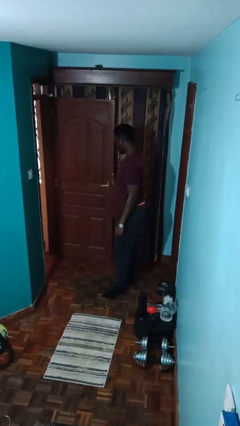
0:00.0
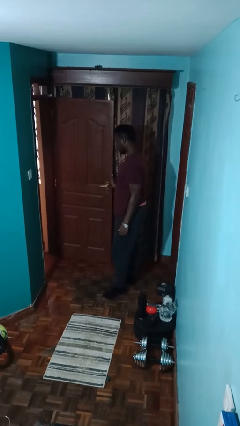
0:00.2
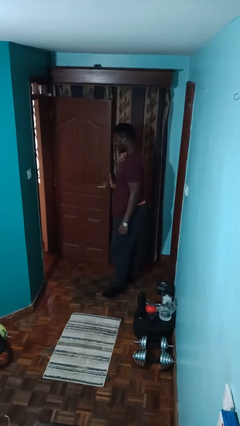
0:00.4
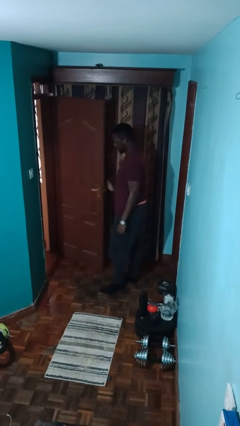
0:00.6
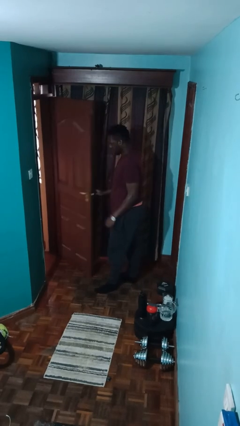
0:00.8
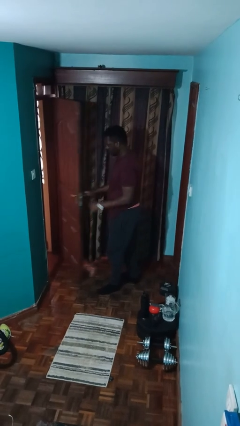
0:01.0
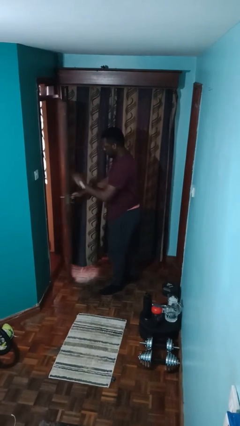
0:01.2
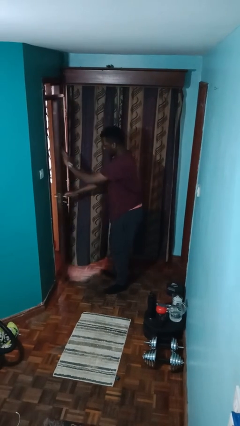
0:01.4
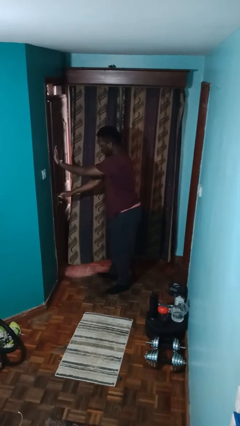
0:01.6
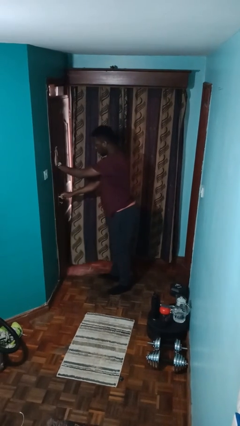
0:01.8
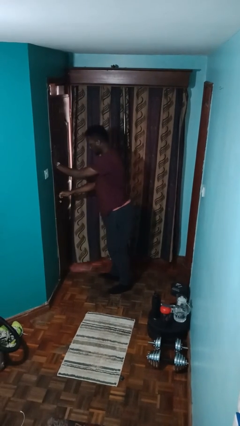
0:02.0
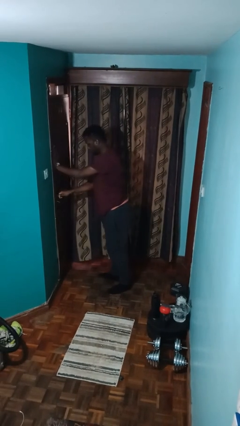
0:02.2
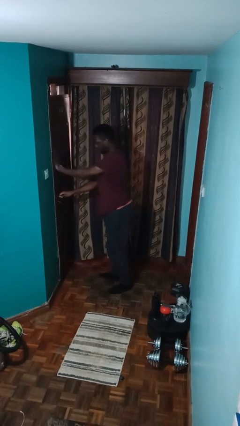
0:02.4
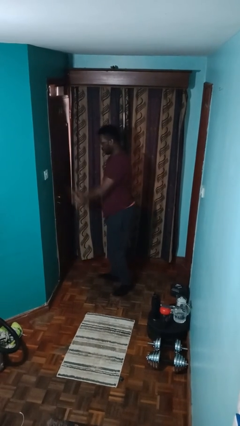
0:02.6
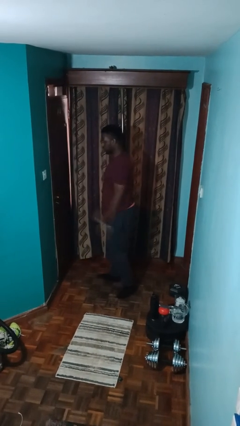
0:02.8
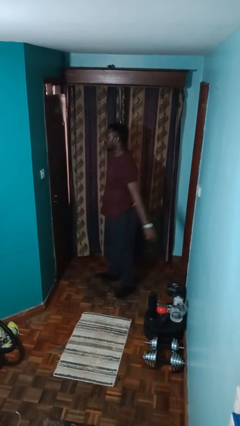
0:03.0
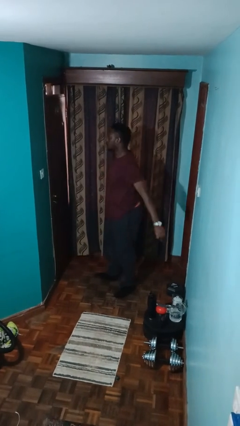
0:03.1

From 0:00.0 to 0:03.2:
person closes facility door

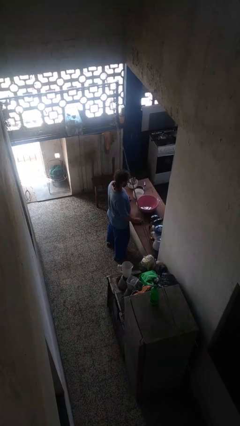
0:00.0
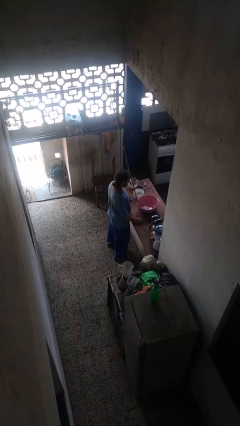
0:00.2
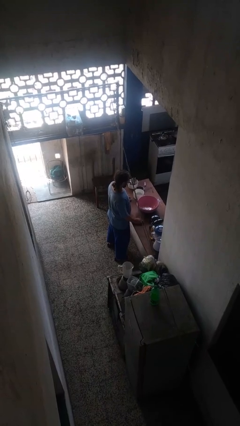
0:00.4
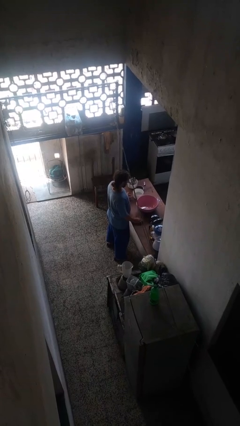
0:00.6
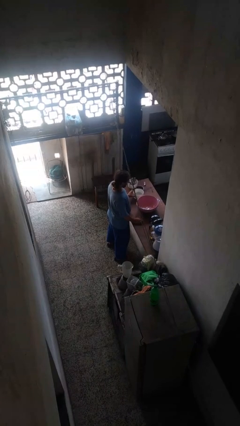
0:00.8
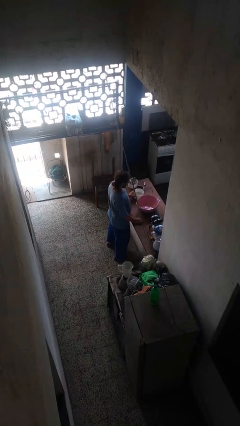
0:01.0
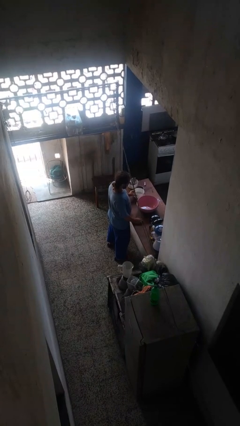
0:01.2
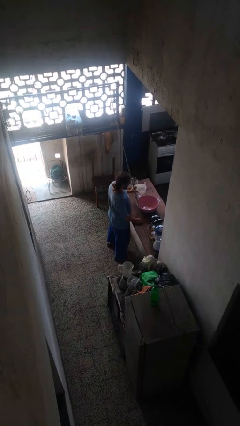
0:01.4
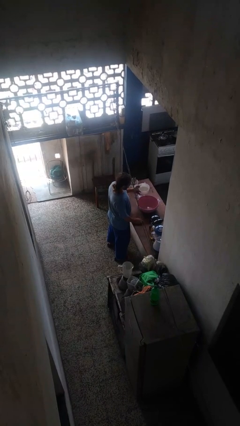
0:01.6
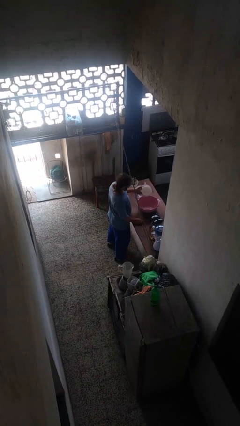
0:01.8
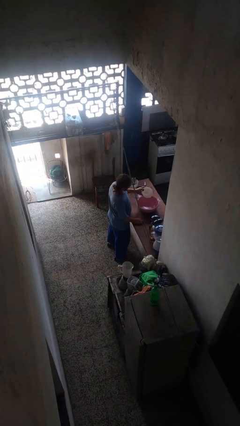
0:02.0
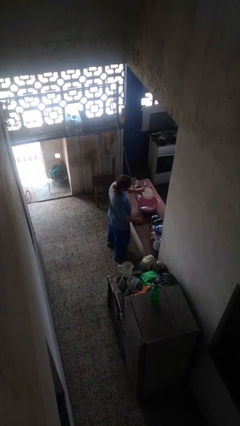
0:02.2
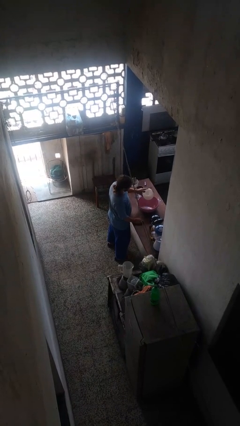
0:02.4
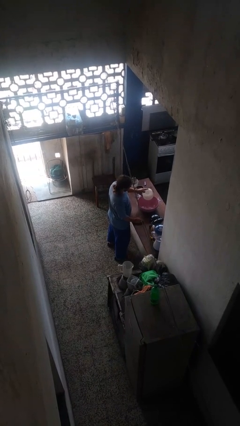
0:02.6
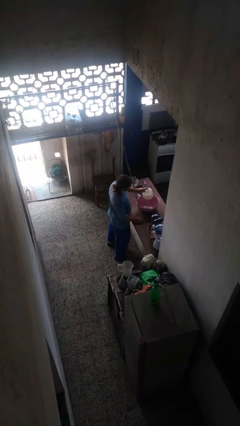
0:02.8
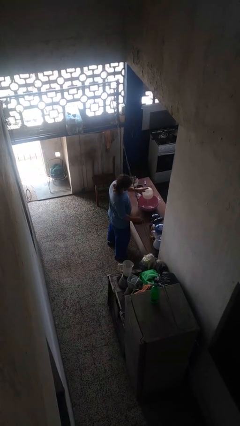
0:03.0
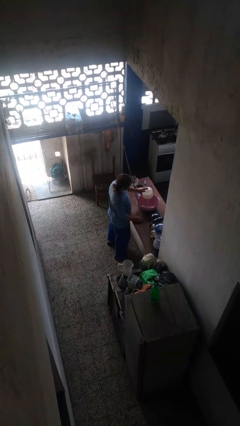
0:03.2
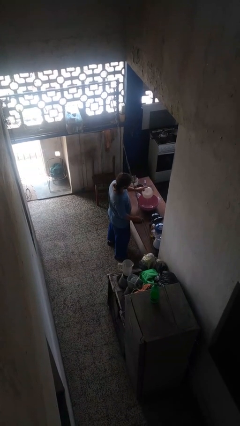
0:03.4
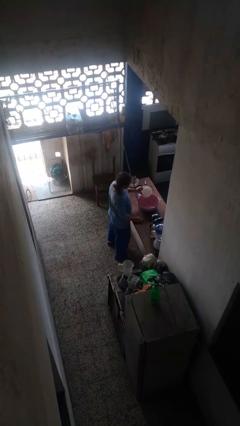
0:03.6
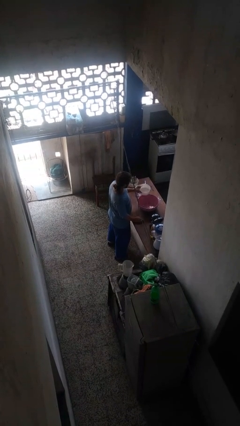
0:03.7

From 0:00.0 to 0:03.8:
person pours into bowl

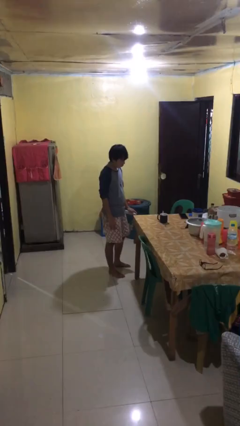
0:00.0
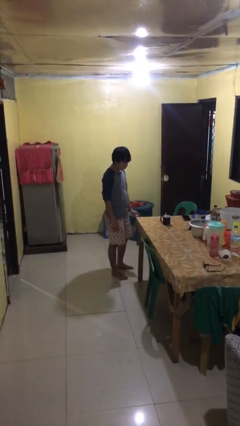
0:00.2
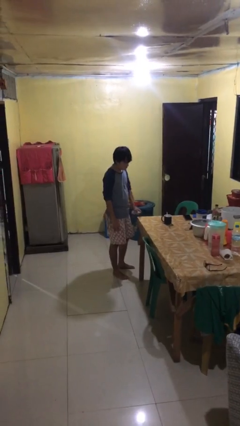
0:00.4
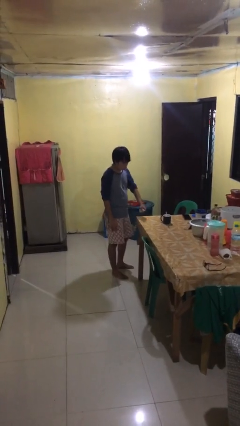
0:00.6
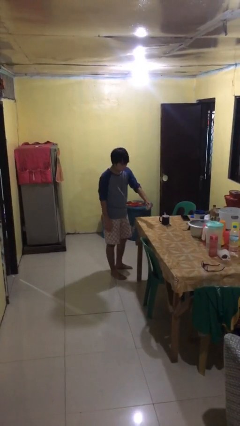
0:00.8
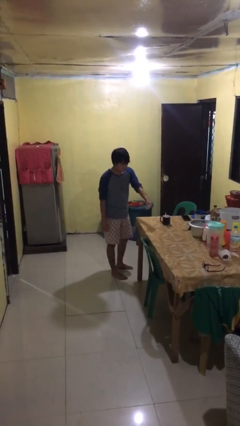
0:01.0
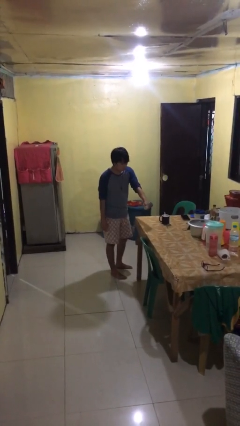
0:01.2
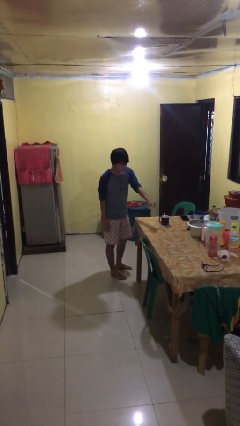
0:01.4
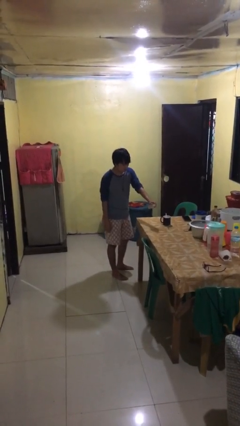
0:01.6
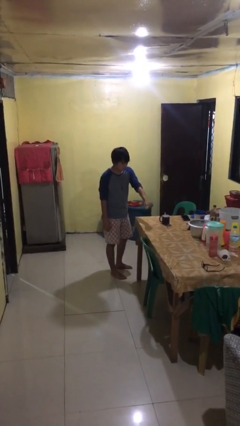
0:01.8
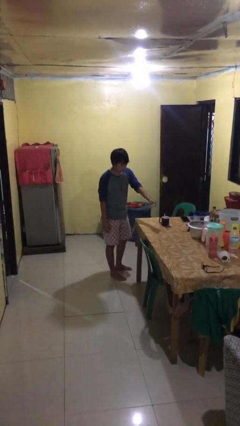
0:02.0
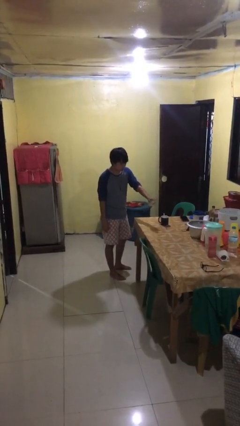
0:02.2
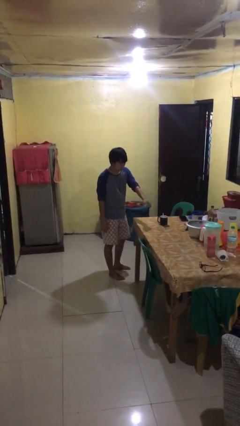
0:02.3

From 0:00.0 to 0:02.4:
person sprays from bottle

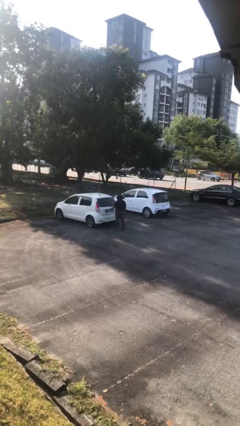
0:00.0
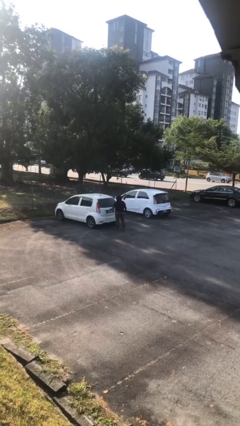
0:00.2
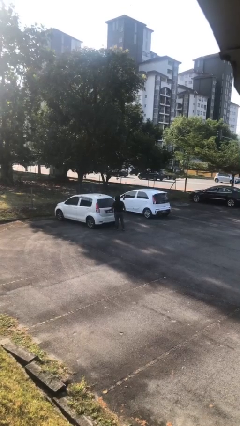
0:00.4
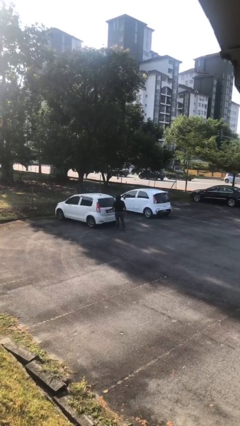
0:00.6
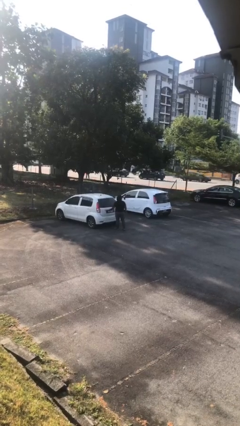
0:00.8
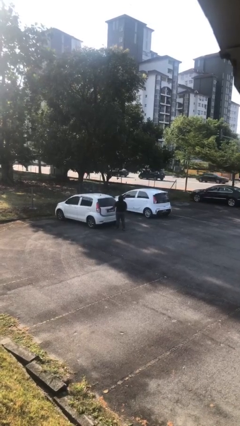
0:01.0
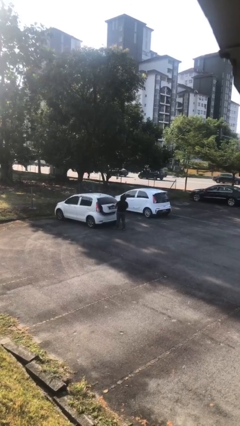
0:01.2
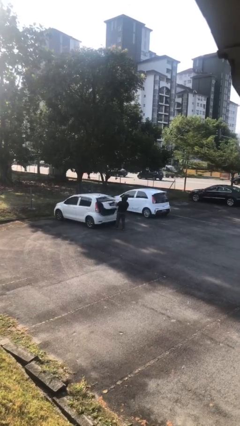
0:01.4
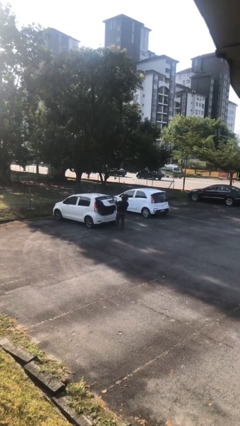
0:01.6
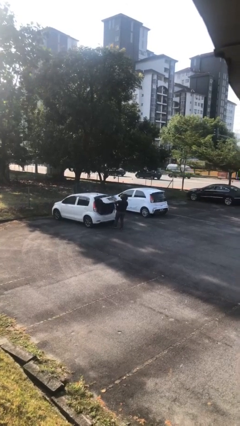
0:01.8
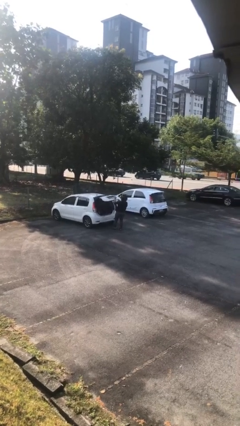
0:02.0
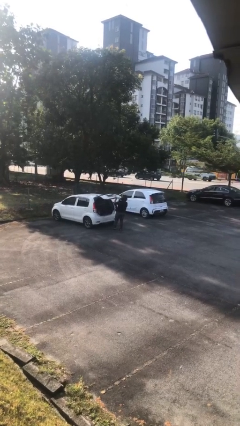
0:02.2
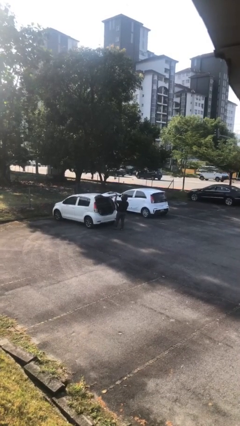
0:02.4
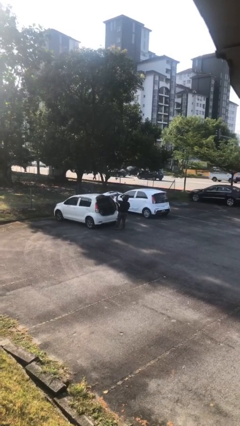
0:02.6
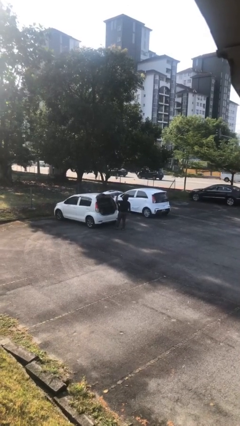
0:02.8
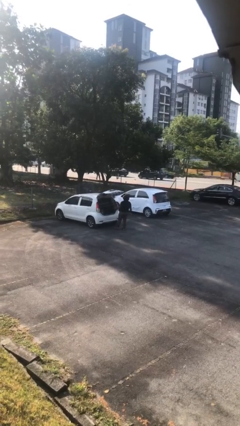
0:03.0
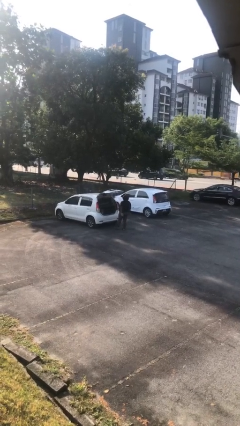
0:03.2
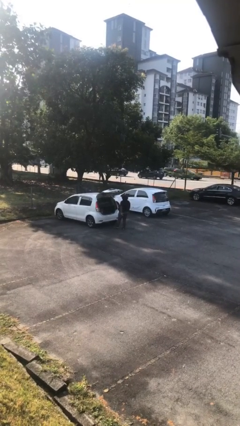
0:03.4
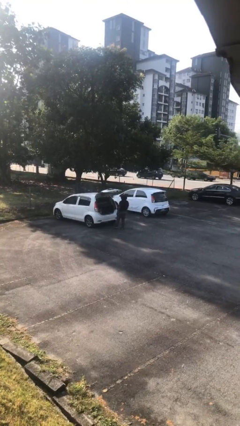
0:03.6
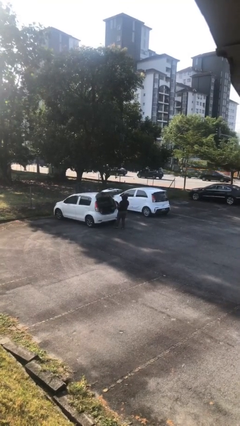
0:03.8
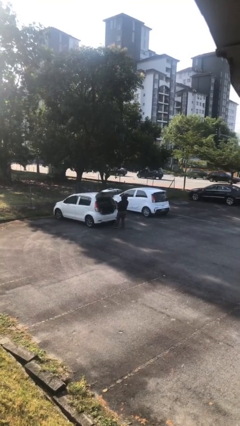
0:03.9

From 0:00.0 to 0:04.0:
person opens car trunk

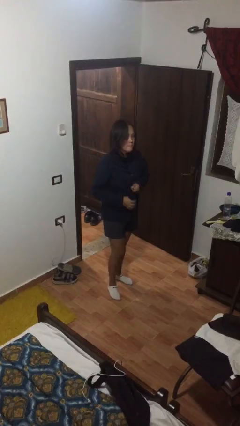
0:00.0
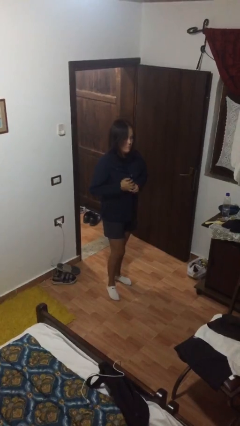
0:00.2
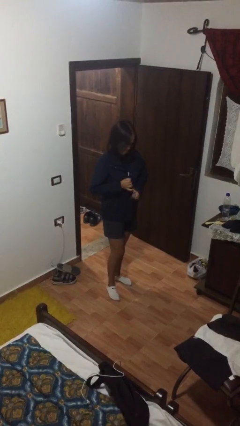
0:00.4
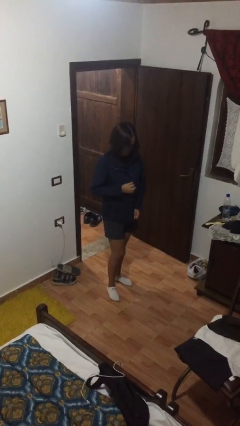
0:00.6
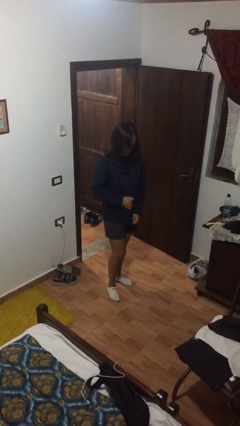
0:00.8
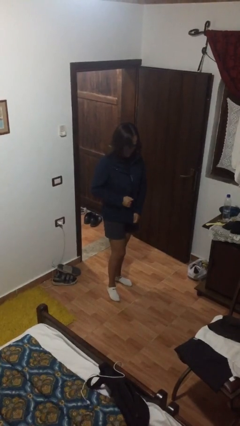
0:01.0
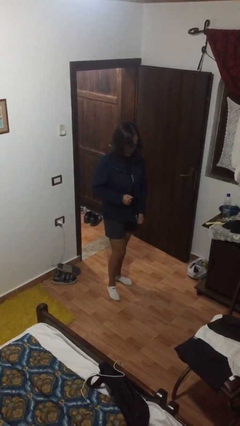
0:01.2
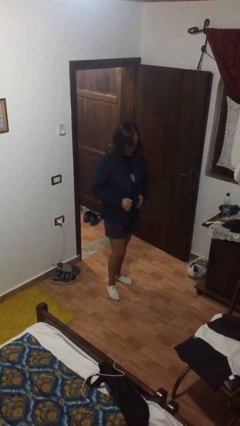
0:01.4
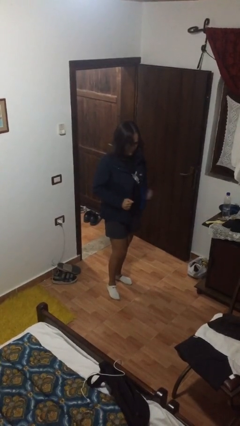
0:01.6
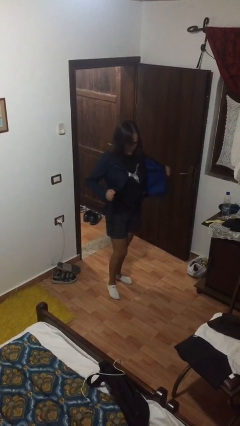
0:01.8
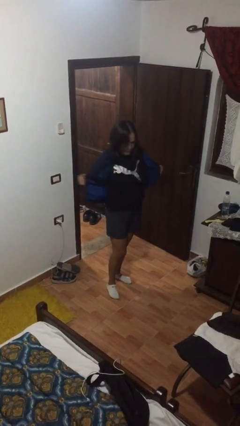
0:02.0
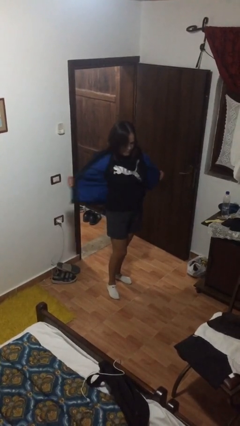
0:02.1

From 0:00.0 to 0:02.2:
person unzips jacket

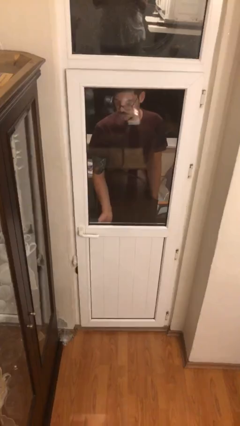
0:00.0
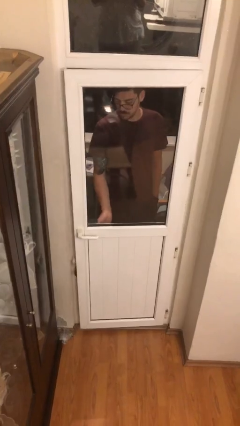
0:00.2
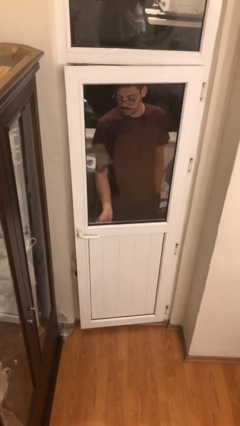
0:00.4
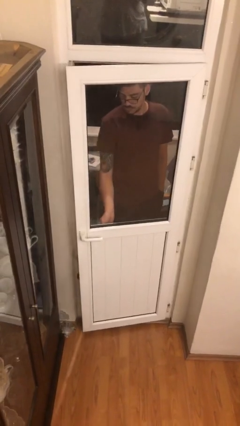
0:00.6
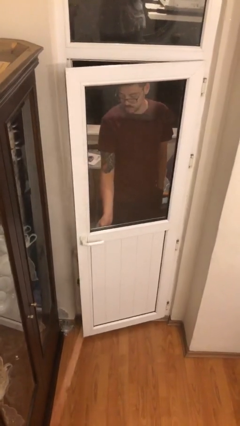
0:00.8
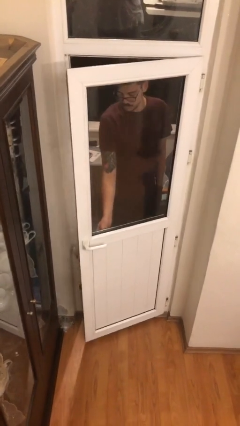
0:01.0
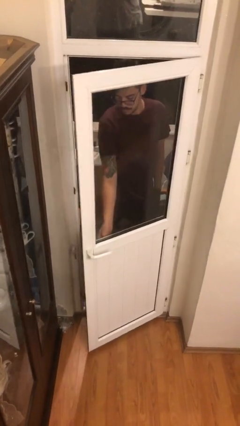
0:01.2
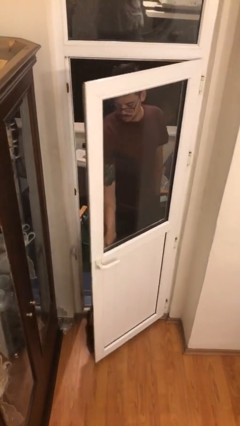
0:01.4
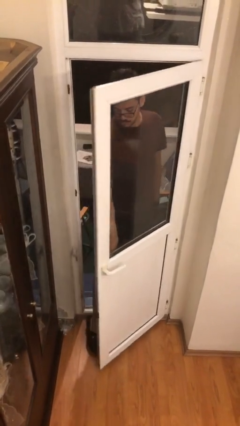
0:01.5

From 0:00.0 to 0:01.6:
person opens facility door

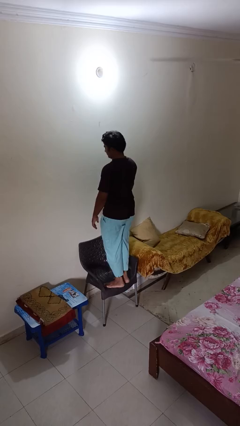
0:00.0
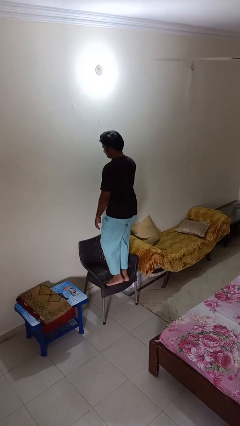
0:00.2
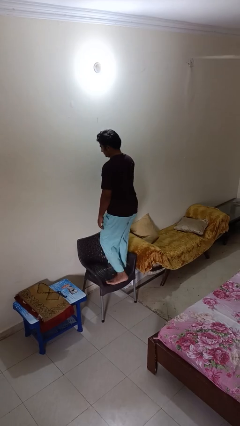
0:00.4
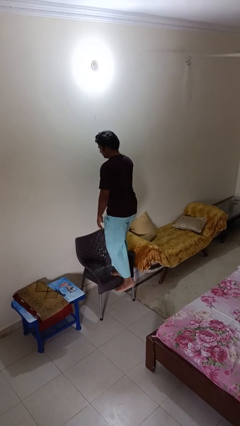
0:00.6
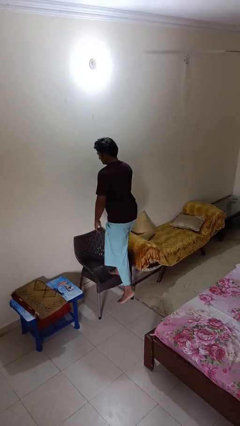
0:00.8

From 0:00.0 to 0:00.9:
person climbs off chair
